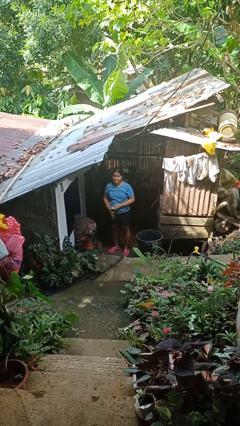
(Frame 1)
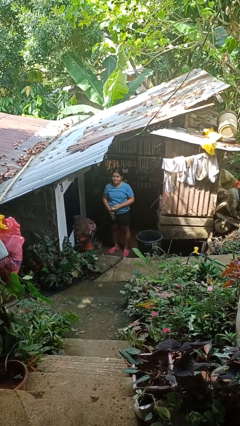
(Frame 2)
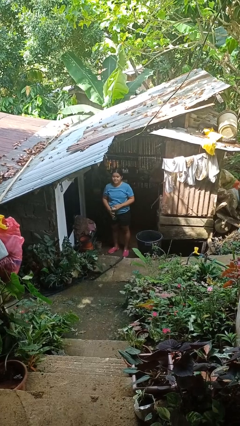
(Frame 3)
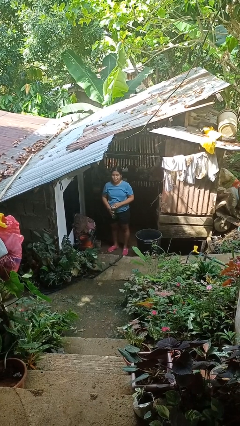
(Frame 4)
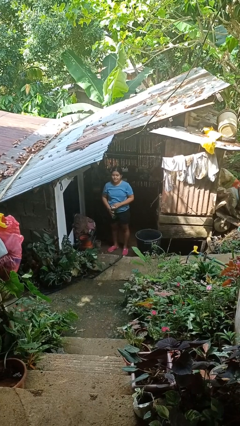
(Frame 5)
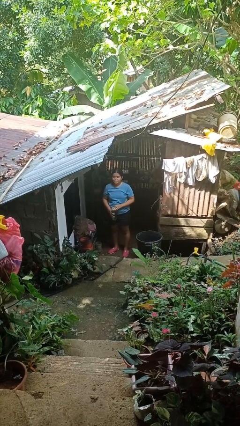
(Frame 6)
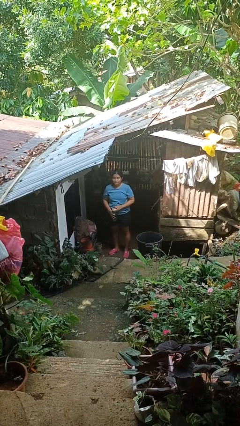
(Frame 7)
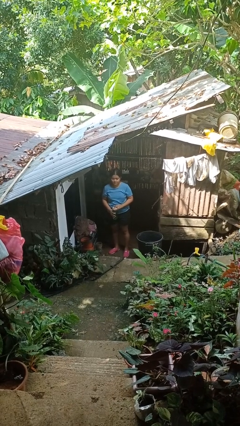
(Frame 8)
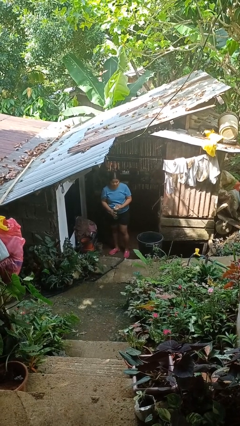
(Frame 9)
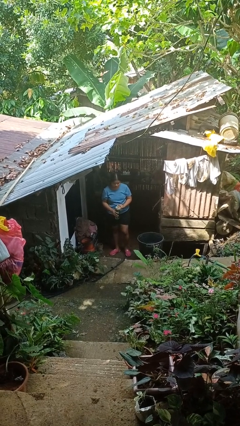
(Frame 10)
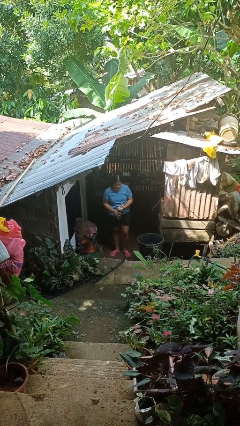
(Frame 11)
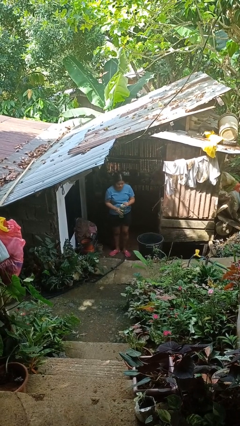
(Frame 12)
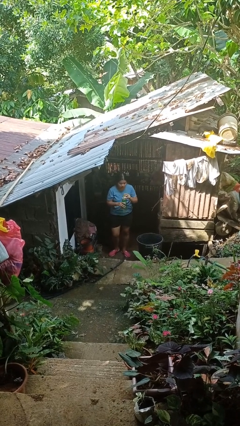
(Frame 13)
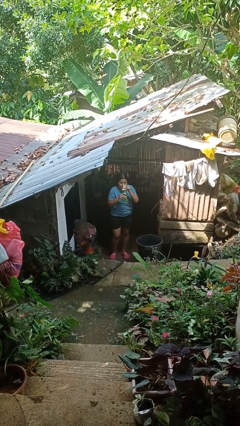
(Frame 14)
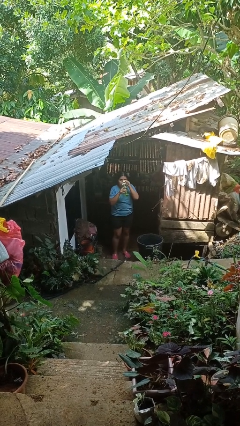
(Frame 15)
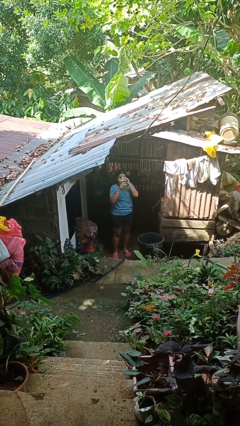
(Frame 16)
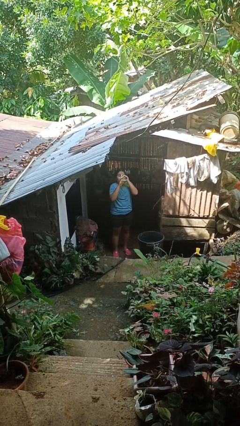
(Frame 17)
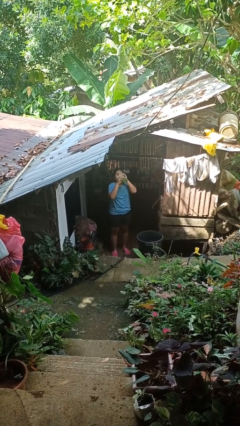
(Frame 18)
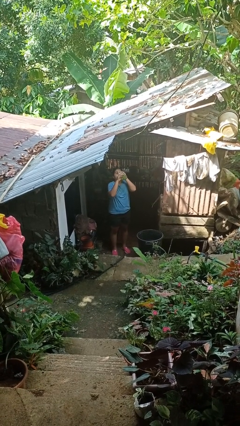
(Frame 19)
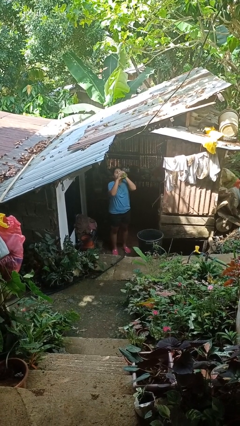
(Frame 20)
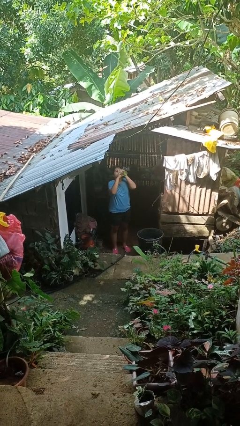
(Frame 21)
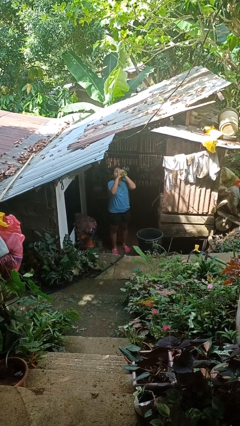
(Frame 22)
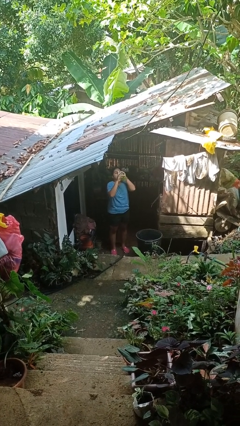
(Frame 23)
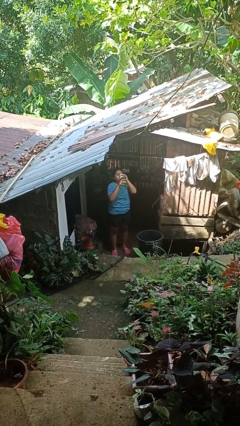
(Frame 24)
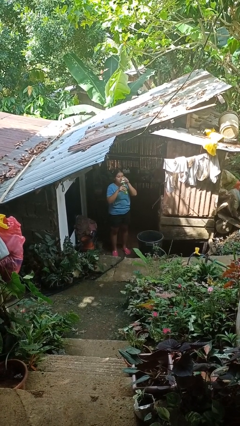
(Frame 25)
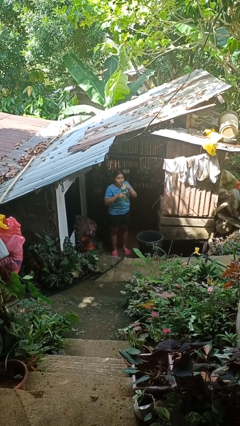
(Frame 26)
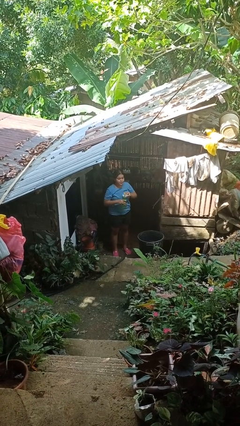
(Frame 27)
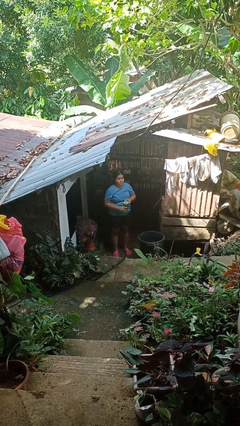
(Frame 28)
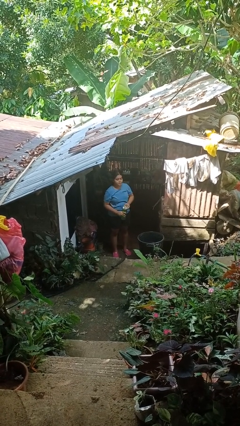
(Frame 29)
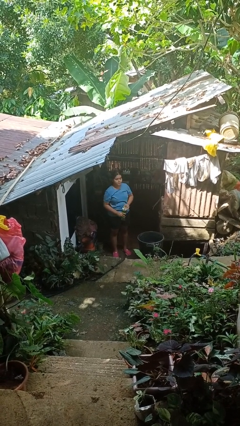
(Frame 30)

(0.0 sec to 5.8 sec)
person drinks from bottle

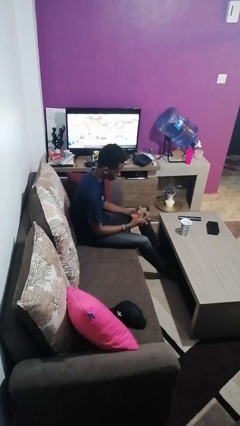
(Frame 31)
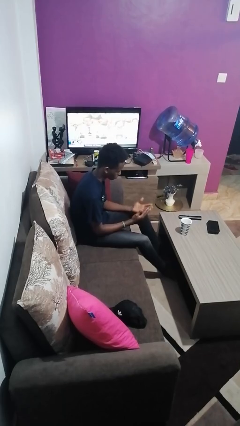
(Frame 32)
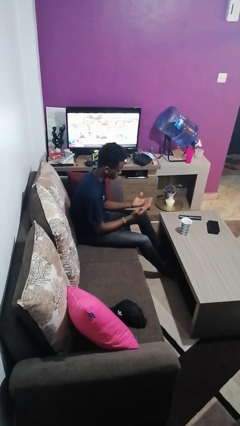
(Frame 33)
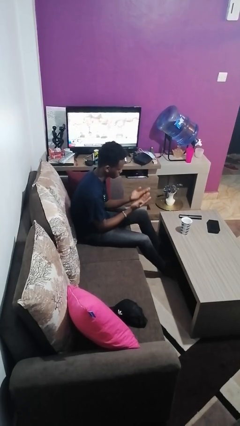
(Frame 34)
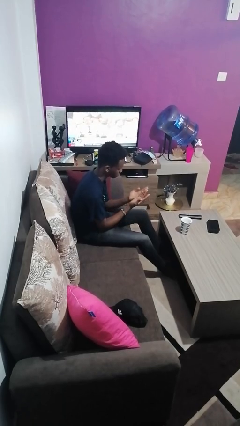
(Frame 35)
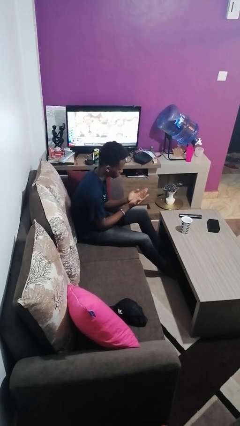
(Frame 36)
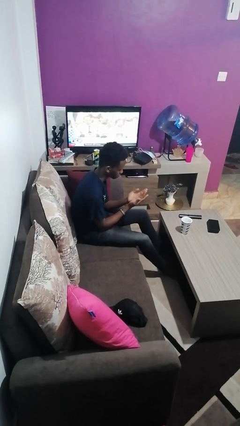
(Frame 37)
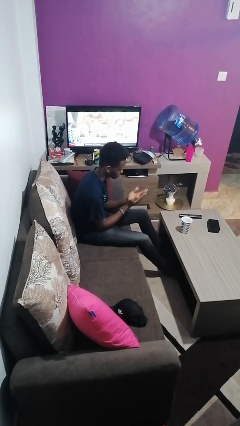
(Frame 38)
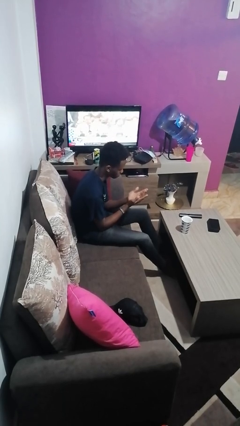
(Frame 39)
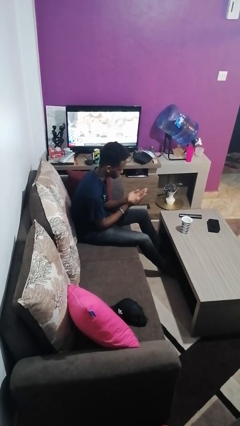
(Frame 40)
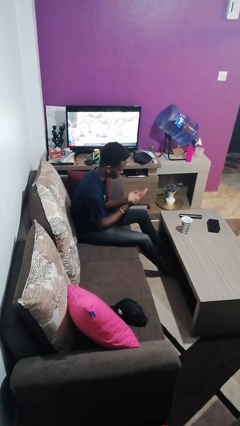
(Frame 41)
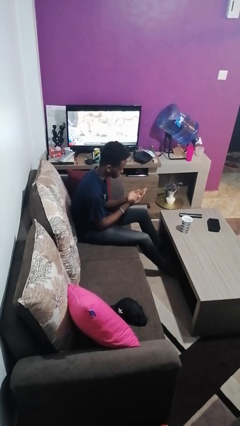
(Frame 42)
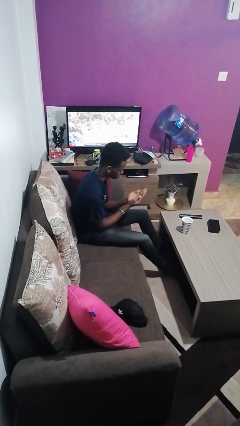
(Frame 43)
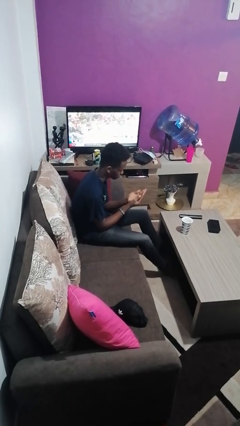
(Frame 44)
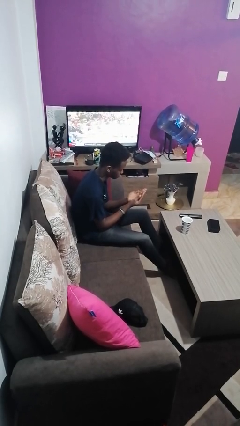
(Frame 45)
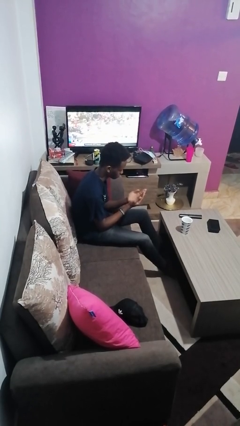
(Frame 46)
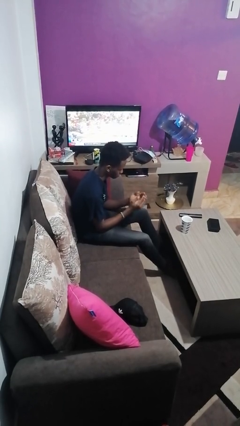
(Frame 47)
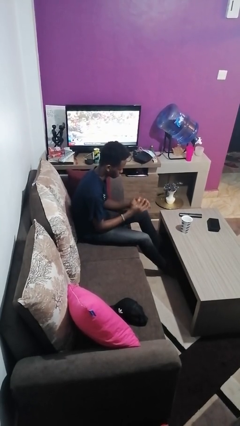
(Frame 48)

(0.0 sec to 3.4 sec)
person looks at hands in lap

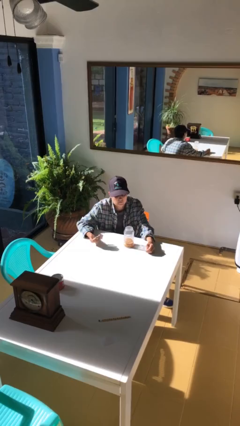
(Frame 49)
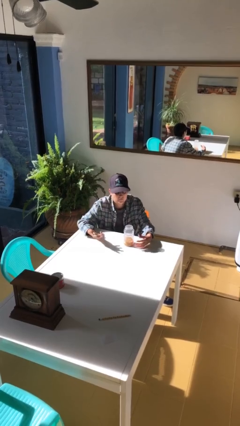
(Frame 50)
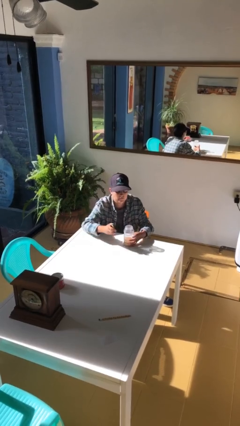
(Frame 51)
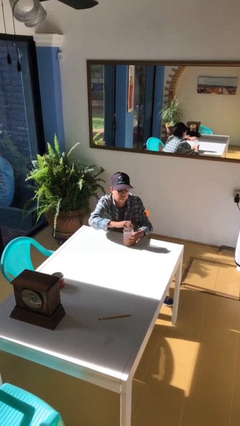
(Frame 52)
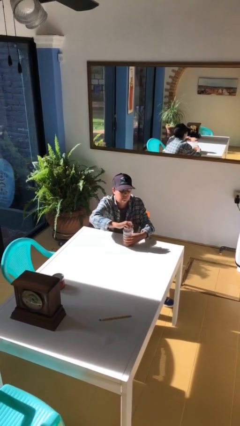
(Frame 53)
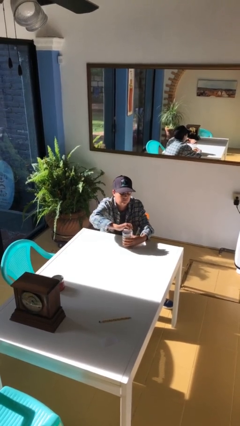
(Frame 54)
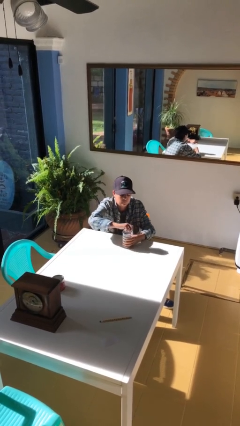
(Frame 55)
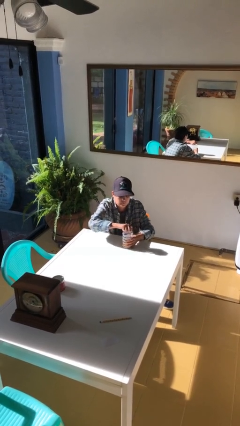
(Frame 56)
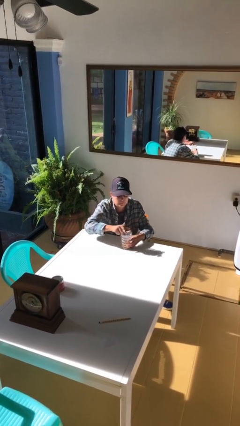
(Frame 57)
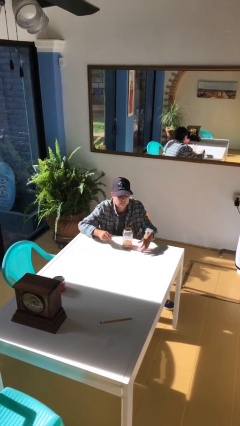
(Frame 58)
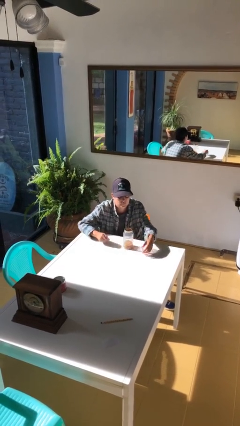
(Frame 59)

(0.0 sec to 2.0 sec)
person closes jar

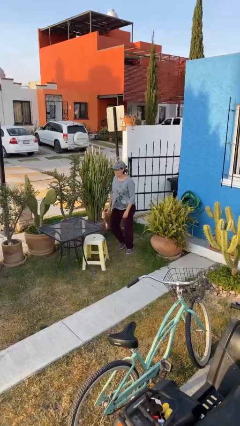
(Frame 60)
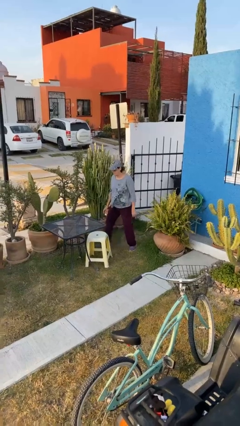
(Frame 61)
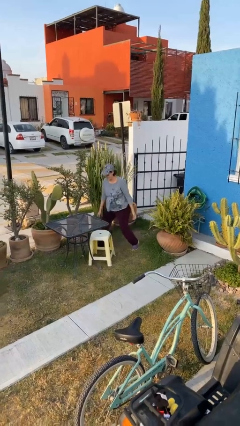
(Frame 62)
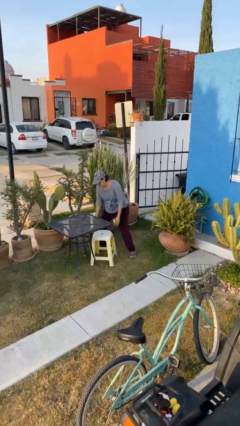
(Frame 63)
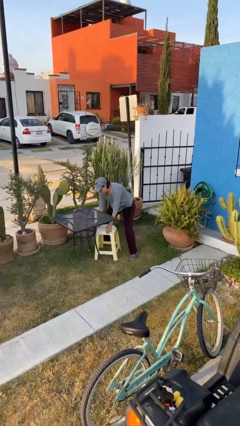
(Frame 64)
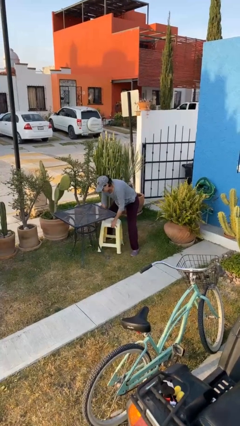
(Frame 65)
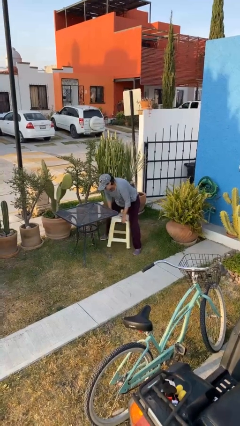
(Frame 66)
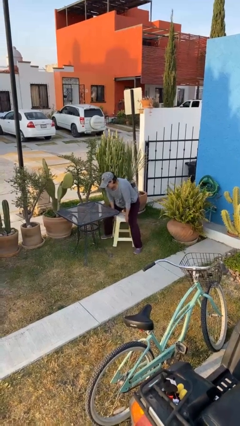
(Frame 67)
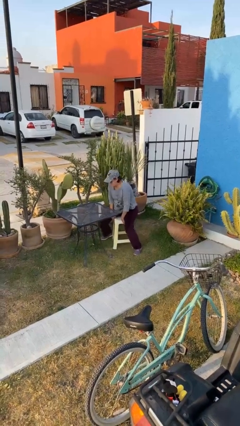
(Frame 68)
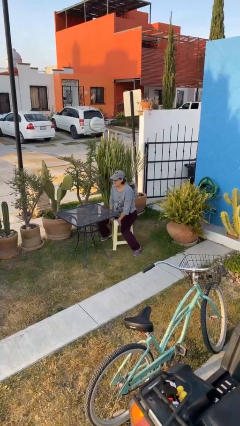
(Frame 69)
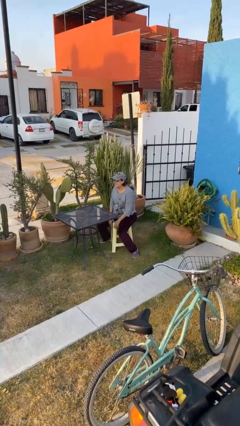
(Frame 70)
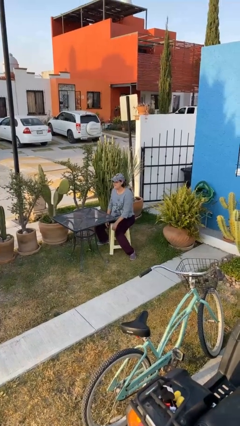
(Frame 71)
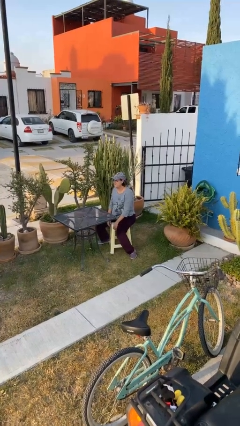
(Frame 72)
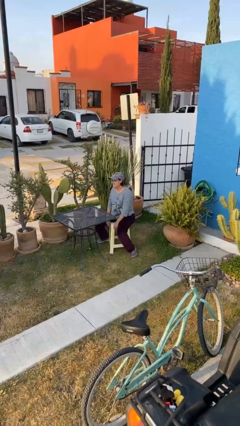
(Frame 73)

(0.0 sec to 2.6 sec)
person sits down

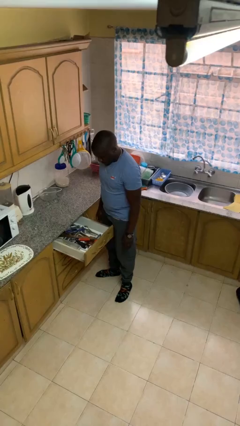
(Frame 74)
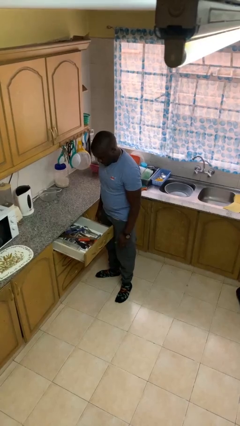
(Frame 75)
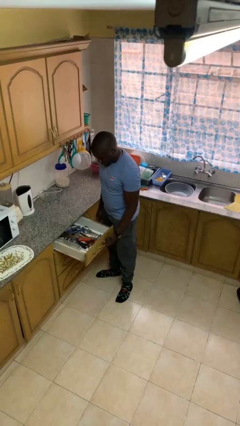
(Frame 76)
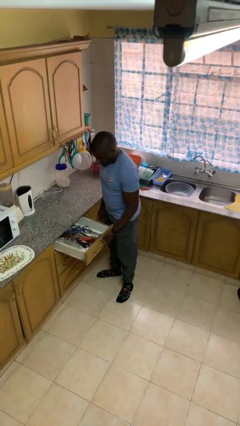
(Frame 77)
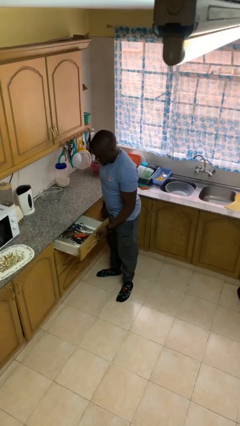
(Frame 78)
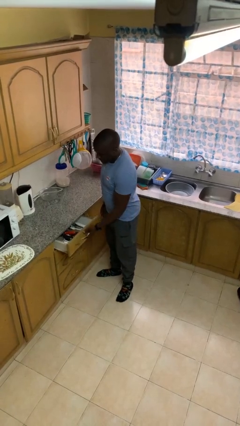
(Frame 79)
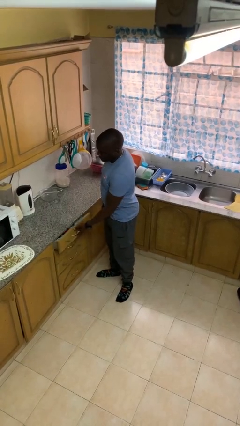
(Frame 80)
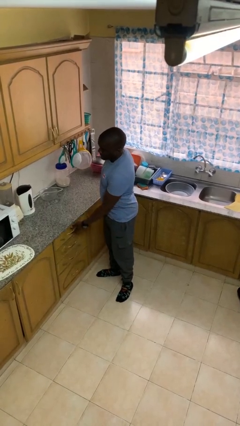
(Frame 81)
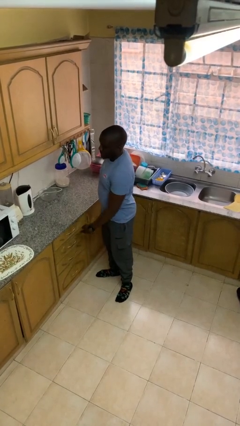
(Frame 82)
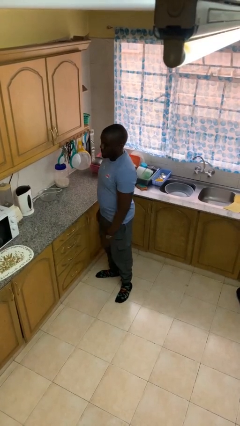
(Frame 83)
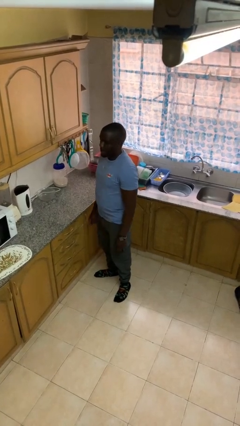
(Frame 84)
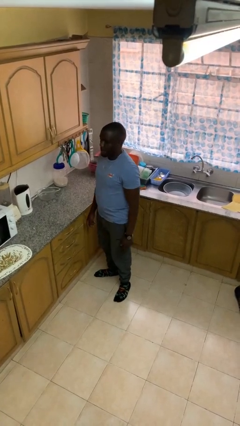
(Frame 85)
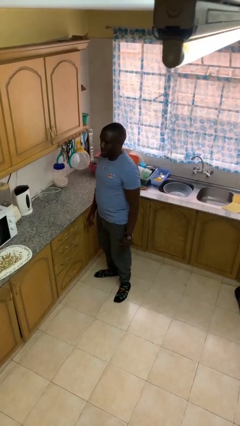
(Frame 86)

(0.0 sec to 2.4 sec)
person closes kitchen drawer

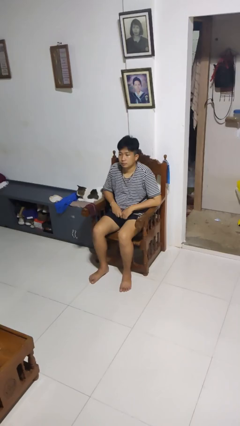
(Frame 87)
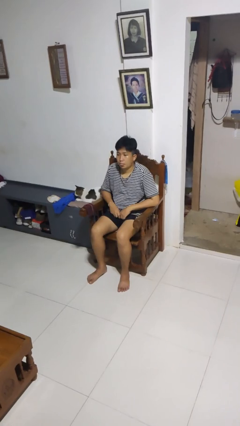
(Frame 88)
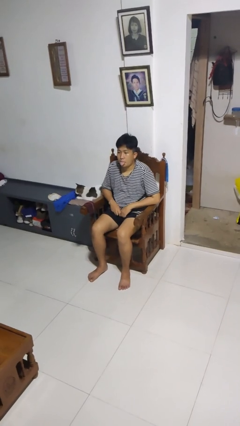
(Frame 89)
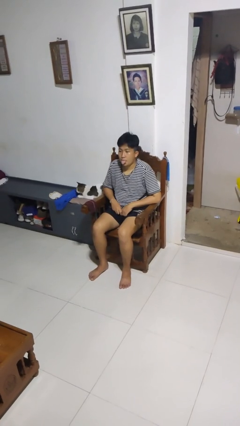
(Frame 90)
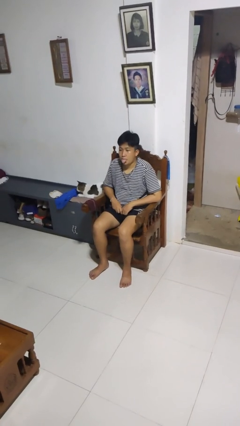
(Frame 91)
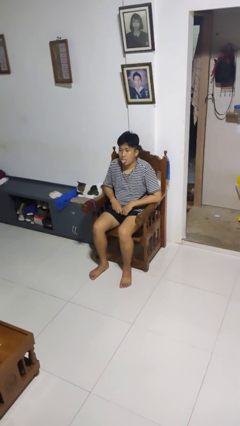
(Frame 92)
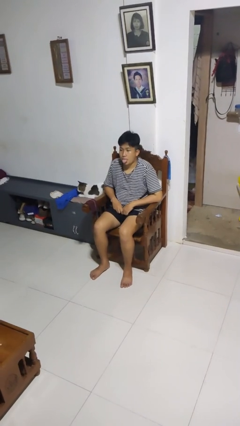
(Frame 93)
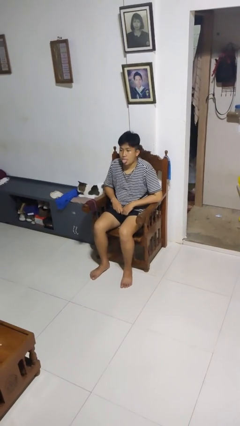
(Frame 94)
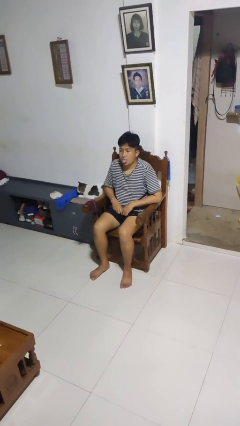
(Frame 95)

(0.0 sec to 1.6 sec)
person sticks out tongue
